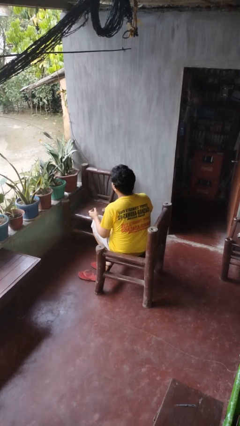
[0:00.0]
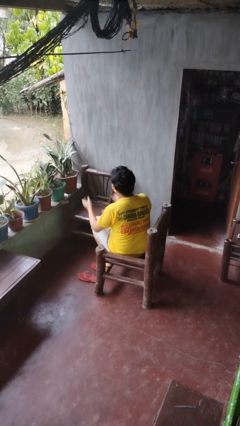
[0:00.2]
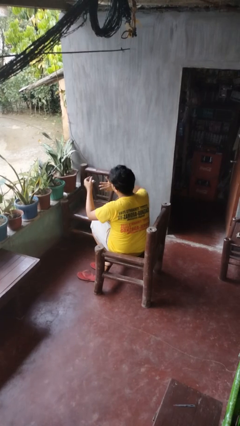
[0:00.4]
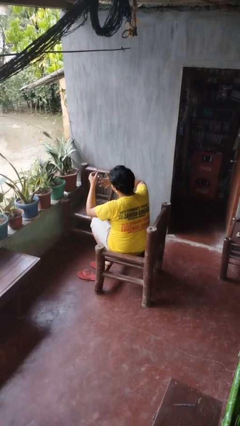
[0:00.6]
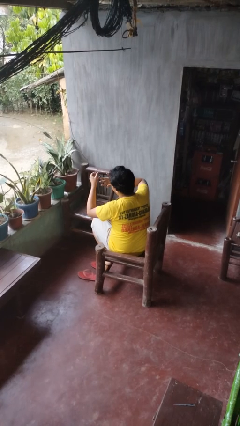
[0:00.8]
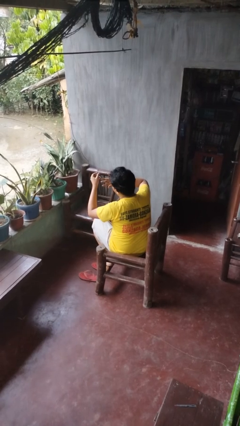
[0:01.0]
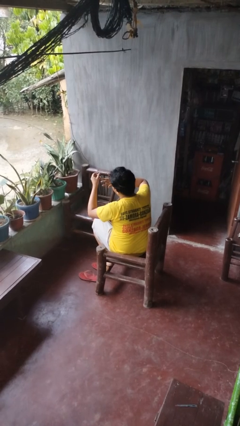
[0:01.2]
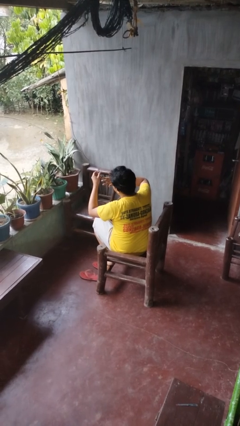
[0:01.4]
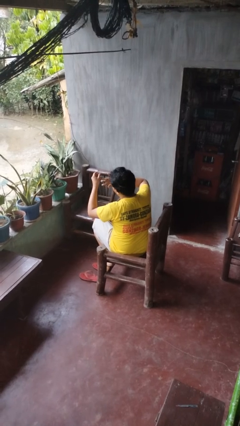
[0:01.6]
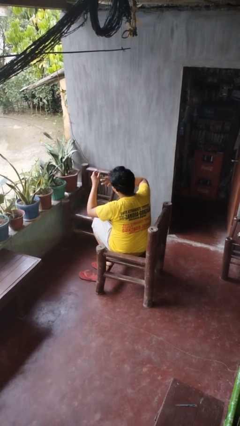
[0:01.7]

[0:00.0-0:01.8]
person clips fingernails

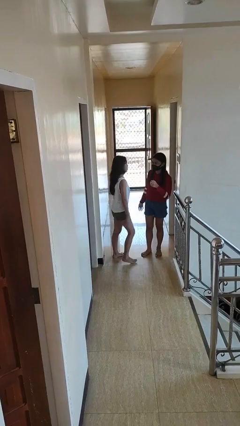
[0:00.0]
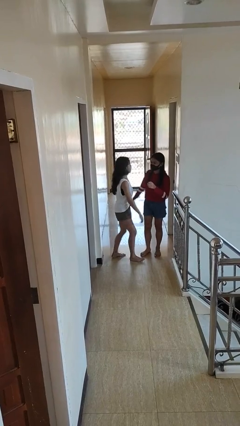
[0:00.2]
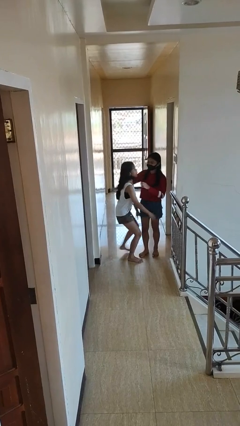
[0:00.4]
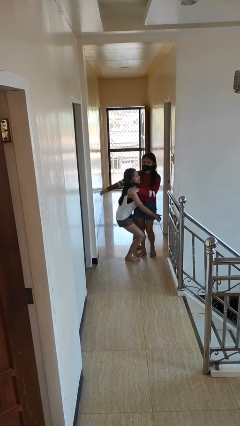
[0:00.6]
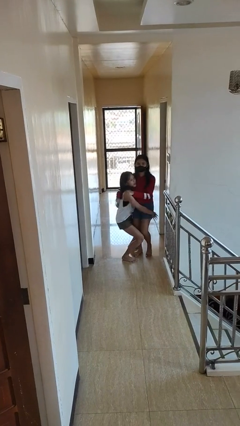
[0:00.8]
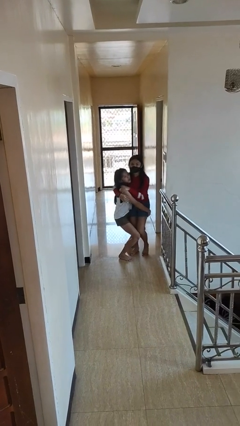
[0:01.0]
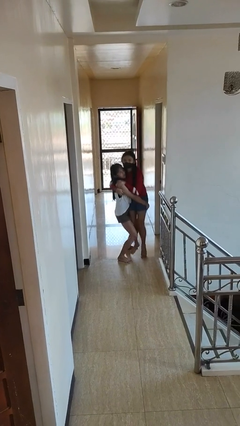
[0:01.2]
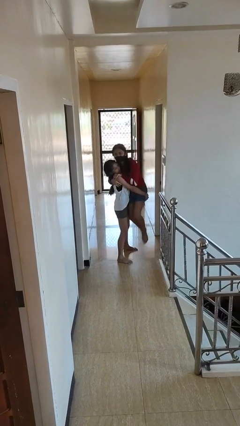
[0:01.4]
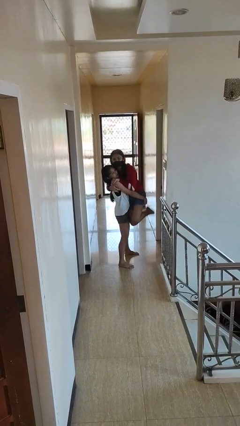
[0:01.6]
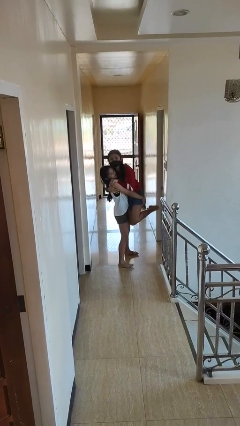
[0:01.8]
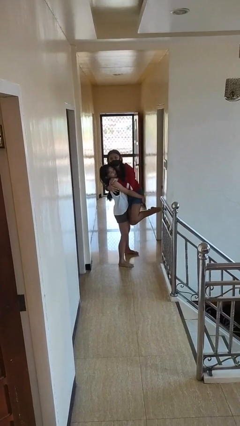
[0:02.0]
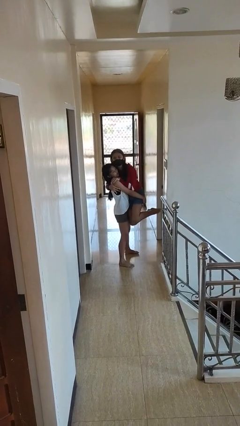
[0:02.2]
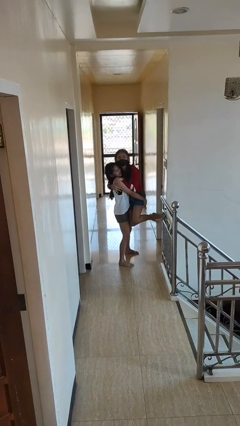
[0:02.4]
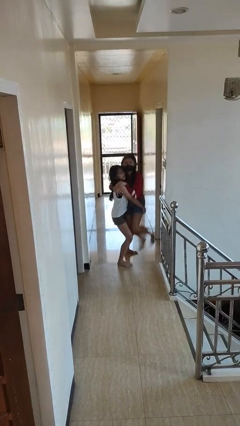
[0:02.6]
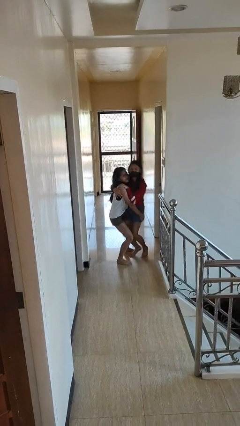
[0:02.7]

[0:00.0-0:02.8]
person picks up person

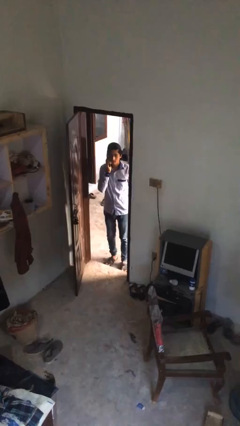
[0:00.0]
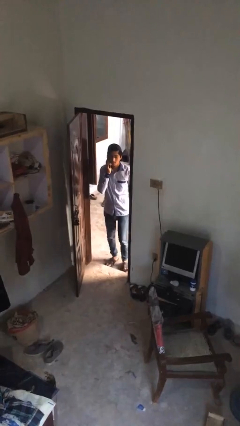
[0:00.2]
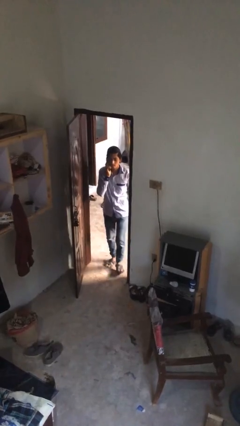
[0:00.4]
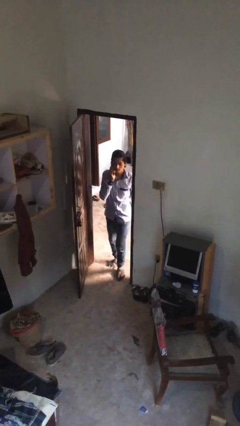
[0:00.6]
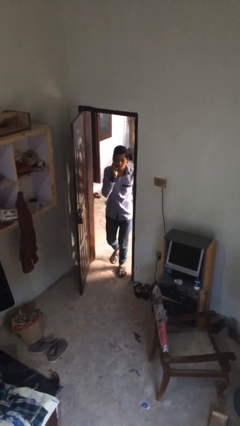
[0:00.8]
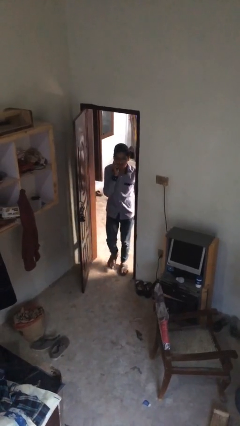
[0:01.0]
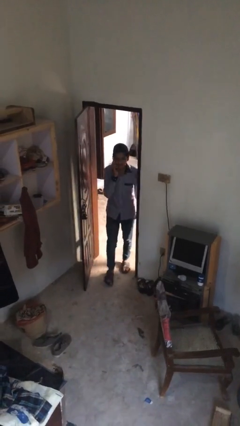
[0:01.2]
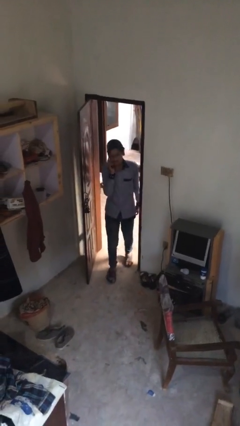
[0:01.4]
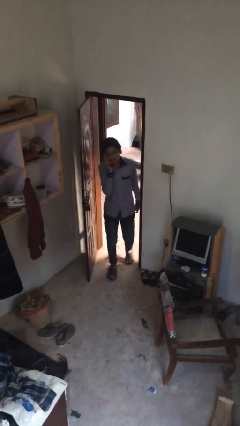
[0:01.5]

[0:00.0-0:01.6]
person enters scene through structure

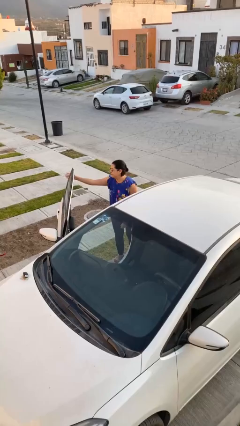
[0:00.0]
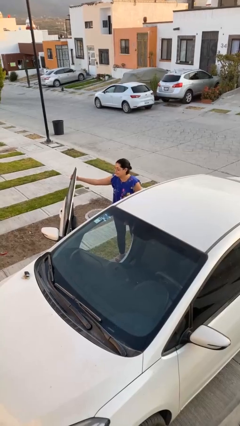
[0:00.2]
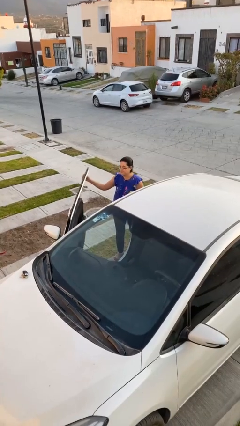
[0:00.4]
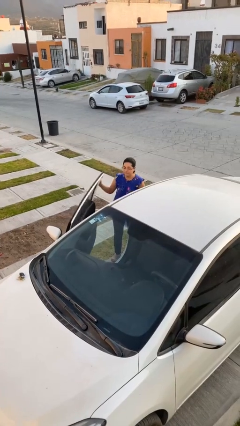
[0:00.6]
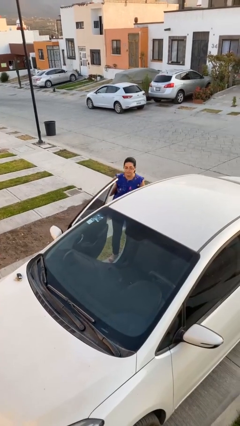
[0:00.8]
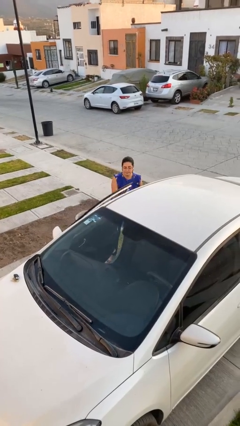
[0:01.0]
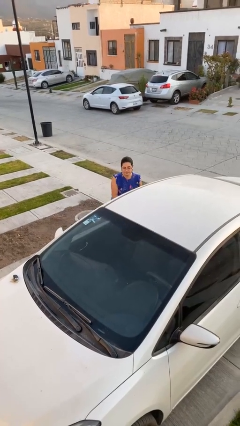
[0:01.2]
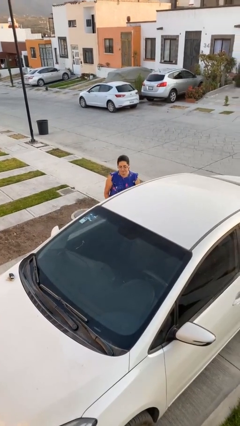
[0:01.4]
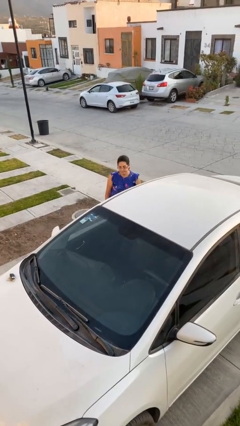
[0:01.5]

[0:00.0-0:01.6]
person closes car door

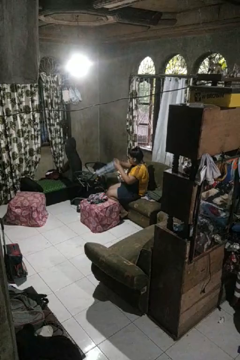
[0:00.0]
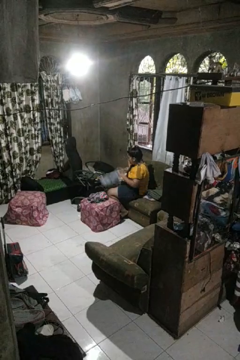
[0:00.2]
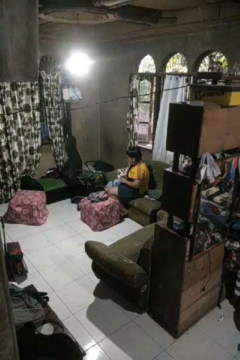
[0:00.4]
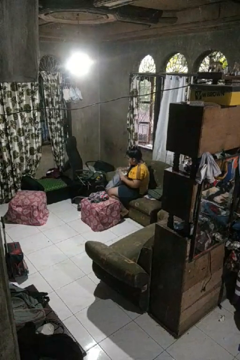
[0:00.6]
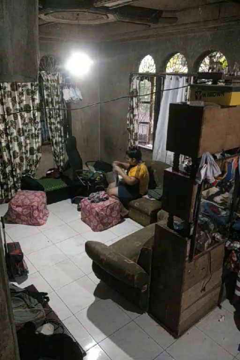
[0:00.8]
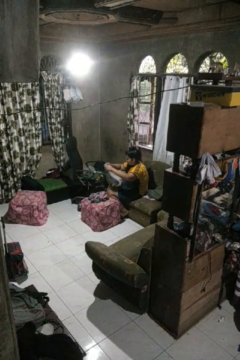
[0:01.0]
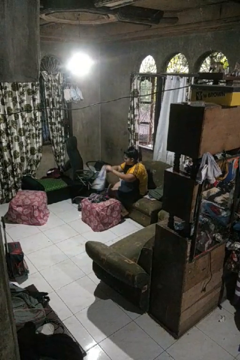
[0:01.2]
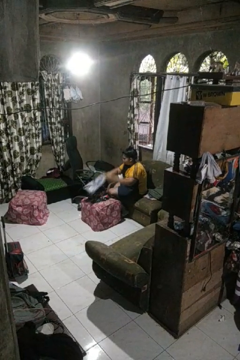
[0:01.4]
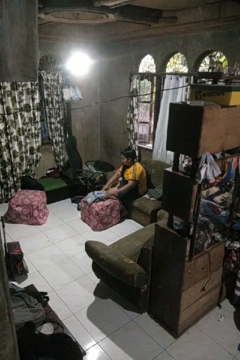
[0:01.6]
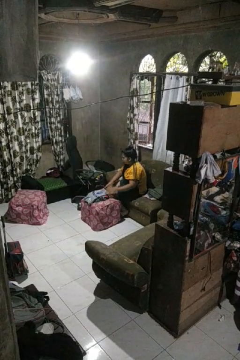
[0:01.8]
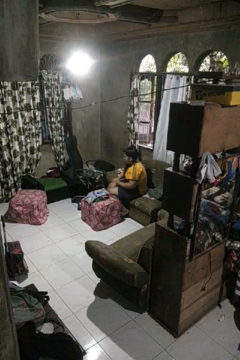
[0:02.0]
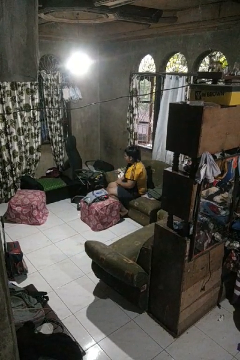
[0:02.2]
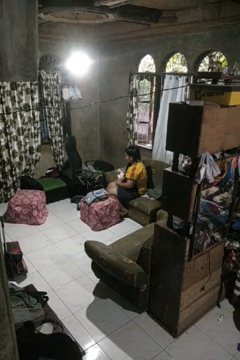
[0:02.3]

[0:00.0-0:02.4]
person folds shirt

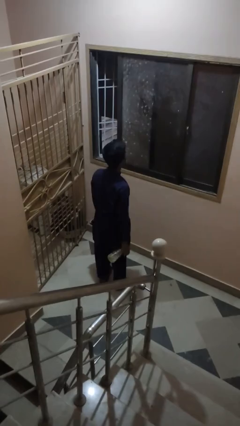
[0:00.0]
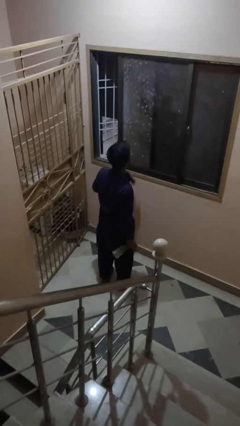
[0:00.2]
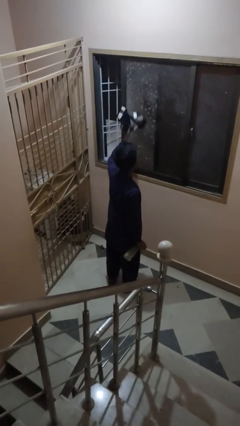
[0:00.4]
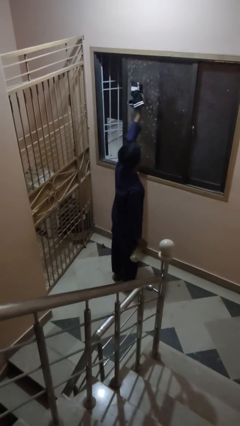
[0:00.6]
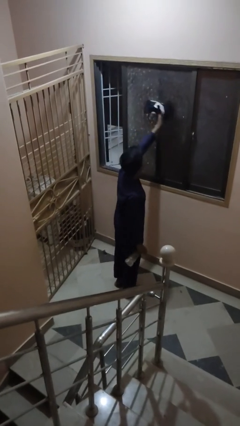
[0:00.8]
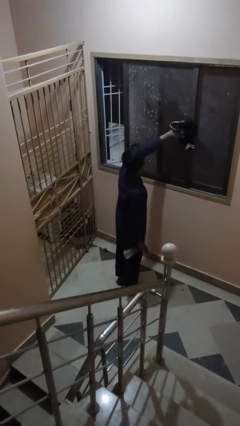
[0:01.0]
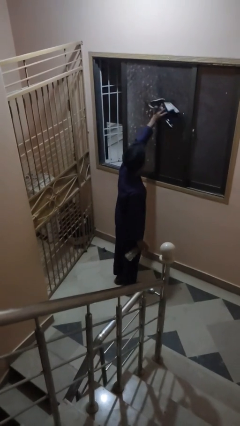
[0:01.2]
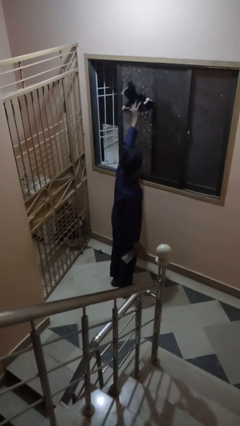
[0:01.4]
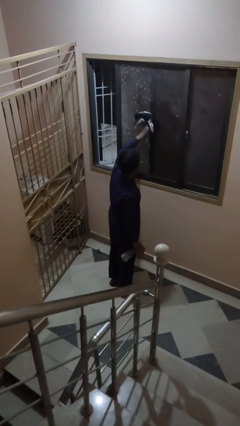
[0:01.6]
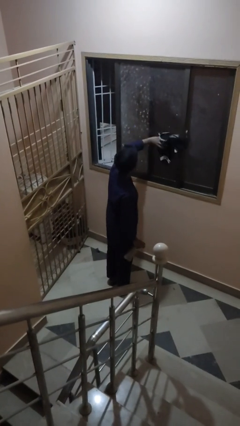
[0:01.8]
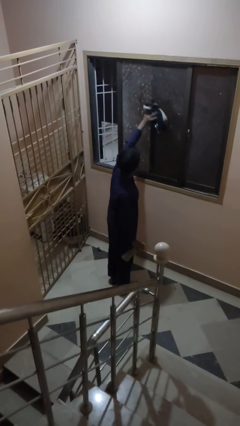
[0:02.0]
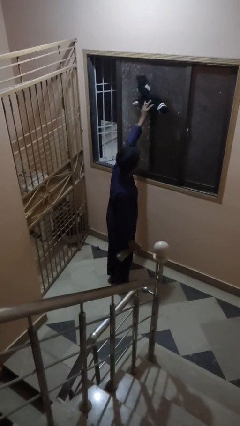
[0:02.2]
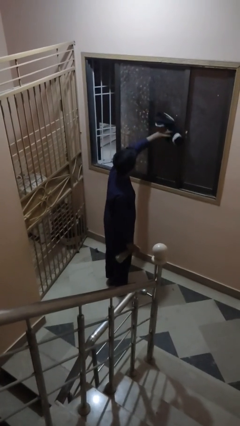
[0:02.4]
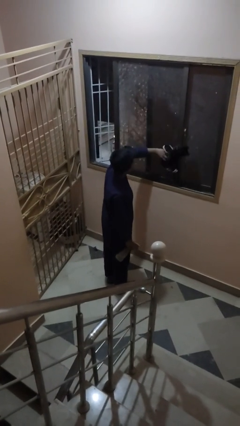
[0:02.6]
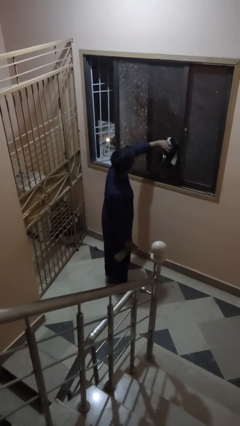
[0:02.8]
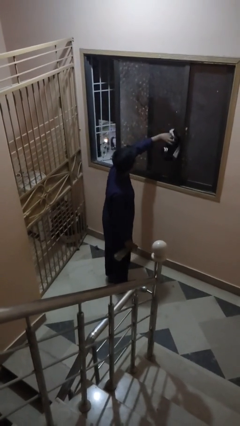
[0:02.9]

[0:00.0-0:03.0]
person washes window

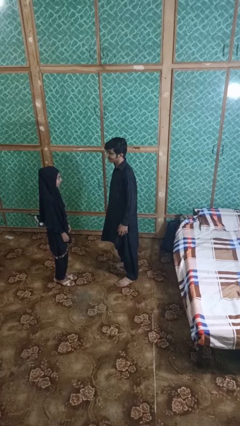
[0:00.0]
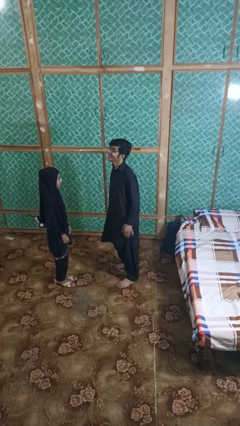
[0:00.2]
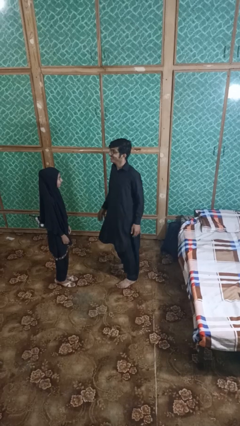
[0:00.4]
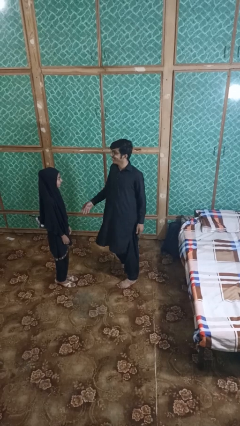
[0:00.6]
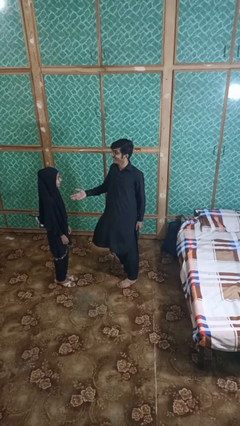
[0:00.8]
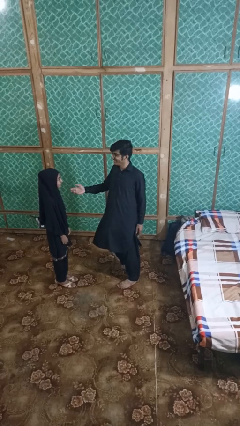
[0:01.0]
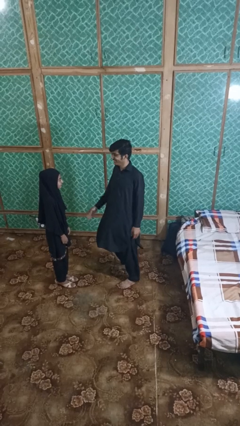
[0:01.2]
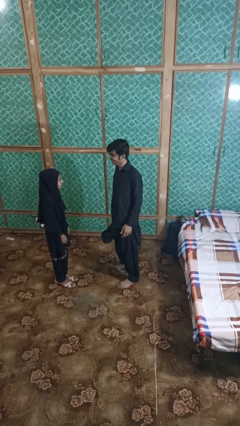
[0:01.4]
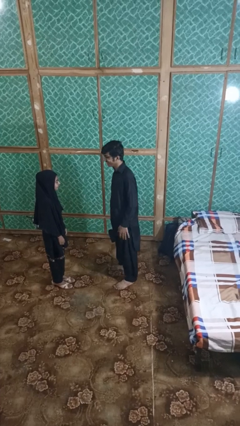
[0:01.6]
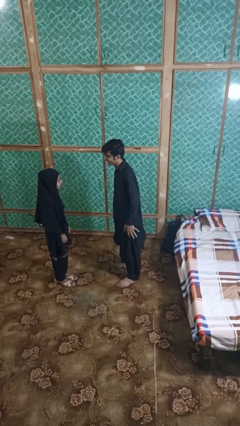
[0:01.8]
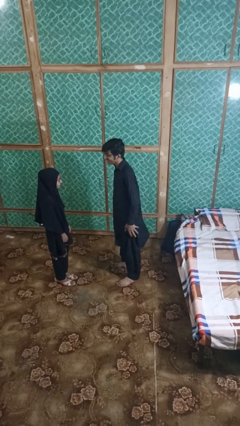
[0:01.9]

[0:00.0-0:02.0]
person laughs with person

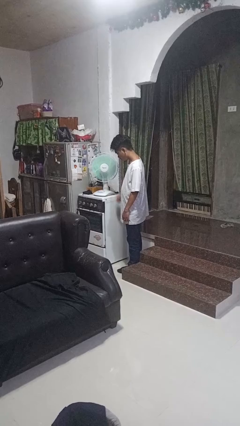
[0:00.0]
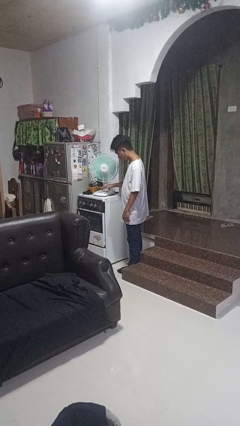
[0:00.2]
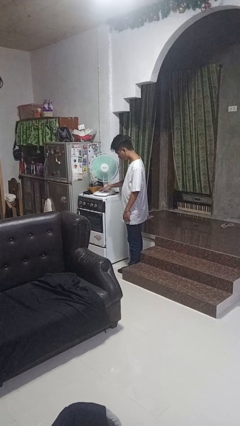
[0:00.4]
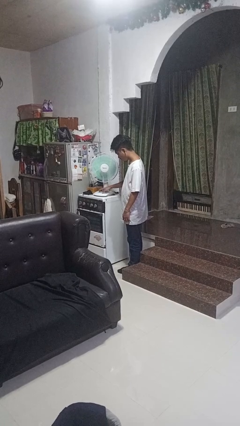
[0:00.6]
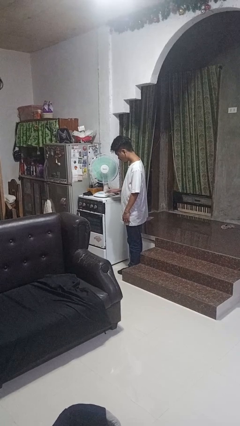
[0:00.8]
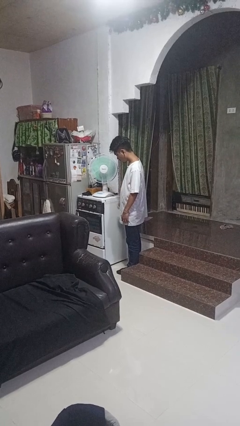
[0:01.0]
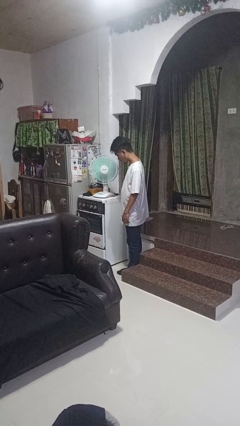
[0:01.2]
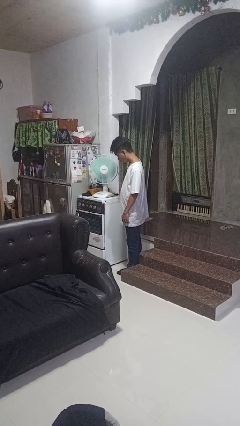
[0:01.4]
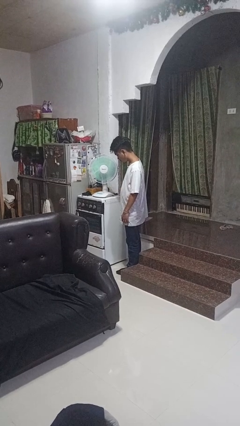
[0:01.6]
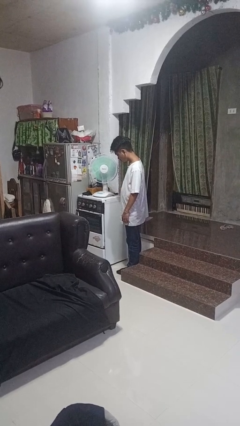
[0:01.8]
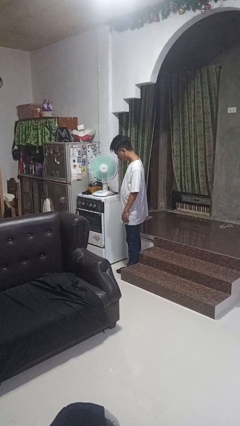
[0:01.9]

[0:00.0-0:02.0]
person turns off fan
